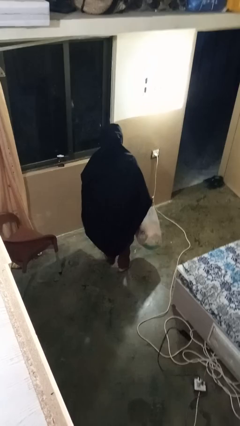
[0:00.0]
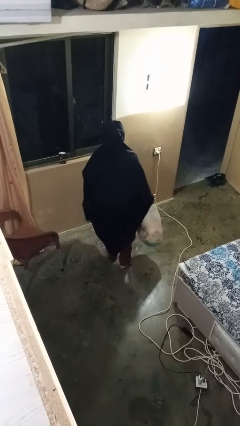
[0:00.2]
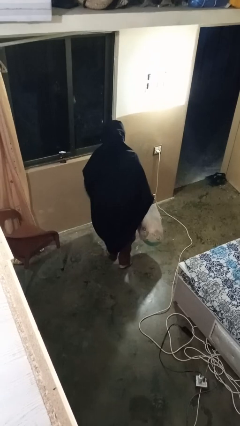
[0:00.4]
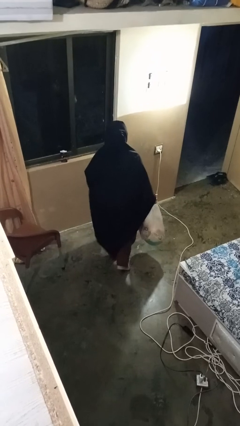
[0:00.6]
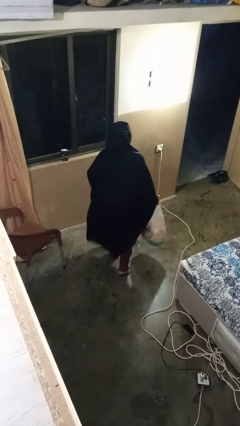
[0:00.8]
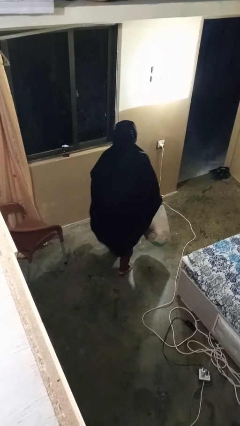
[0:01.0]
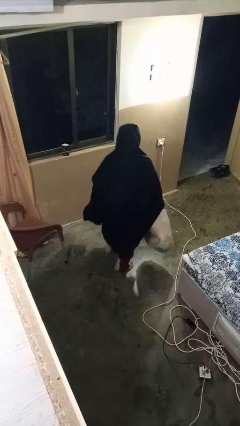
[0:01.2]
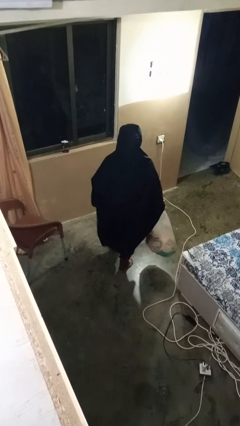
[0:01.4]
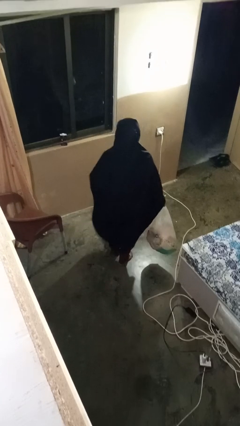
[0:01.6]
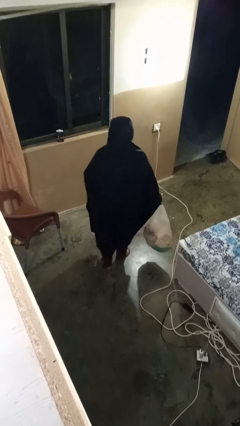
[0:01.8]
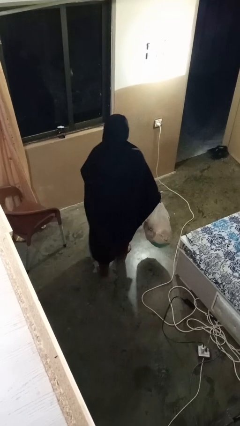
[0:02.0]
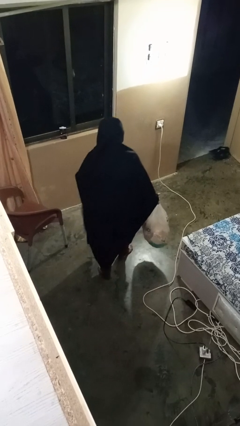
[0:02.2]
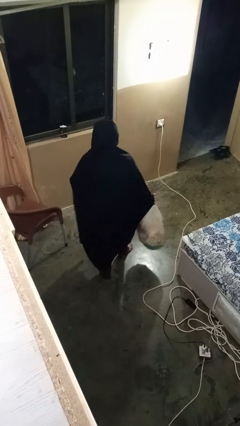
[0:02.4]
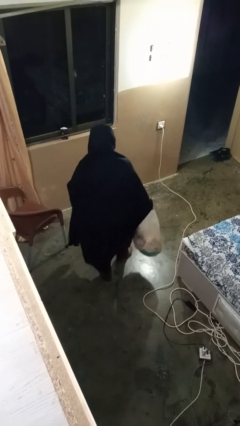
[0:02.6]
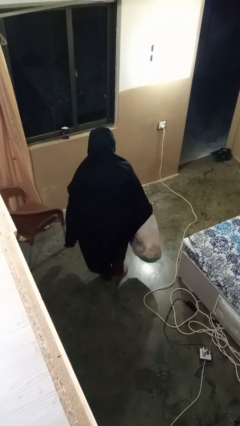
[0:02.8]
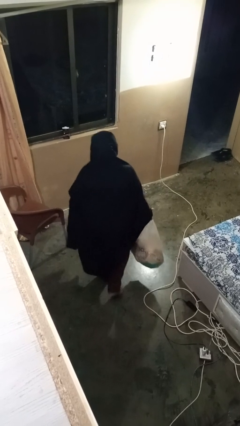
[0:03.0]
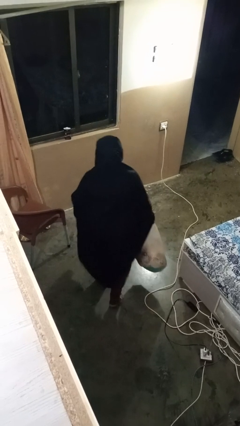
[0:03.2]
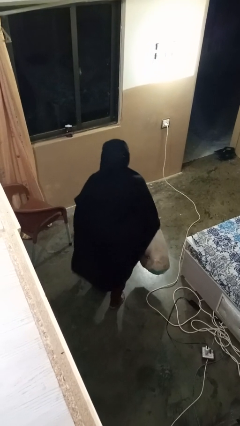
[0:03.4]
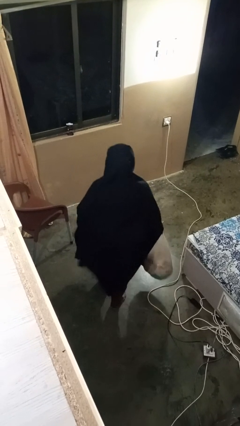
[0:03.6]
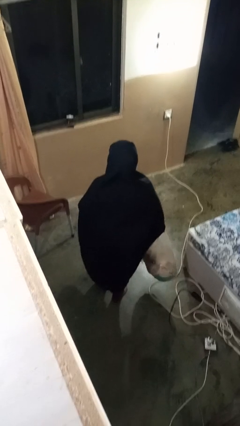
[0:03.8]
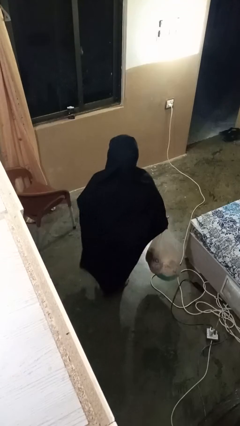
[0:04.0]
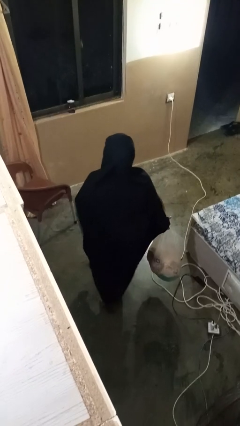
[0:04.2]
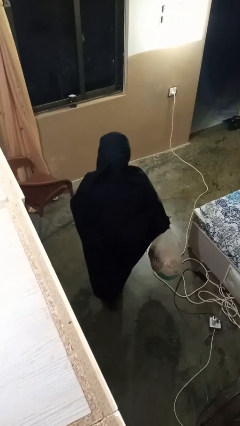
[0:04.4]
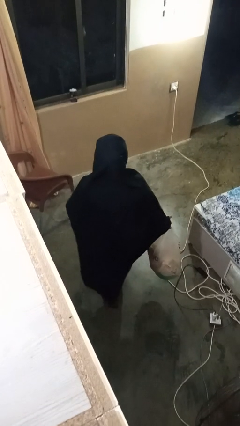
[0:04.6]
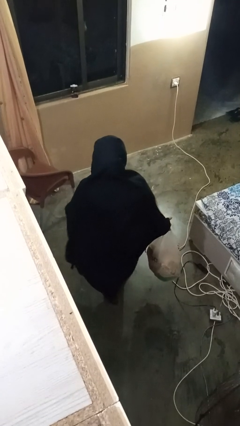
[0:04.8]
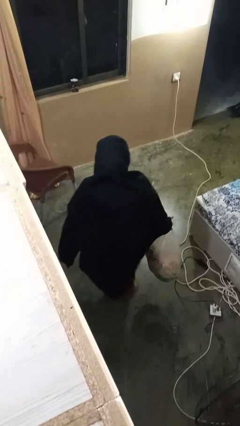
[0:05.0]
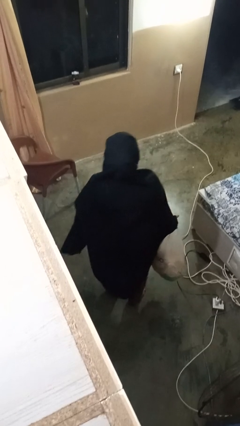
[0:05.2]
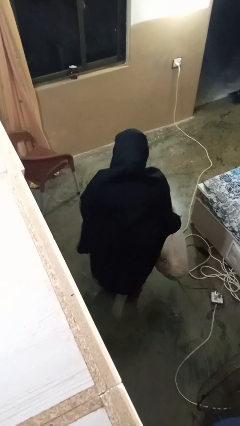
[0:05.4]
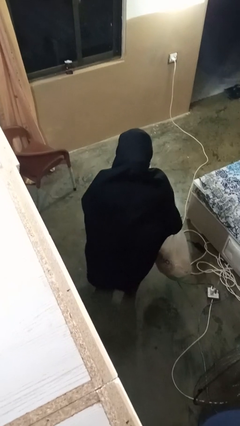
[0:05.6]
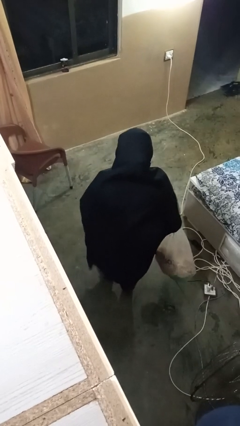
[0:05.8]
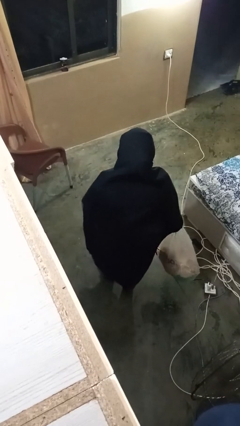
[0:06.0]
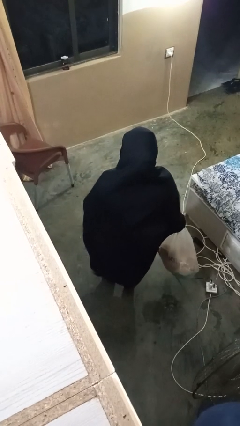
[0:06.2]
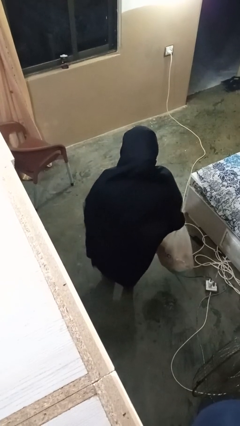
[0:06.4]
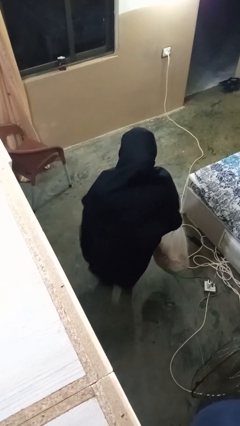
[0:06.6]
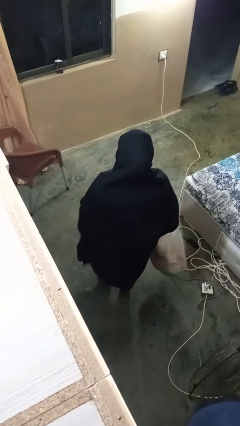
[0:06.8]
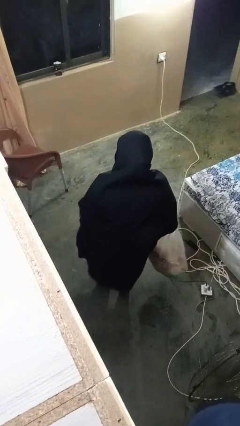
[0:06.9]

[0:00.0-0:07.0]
person carries groceries

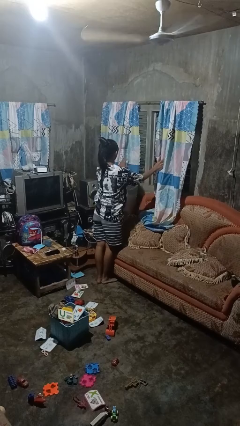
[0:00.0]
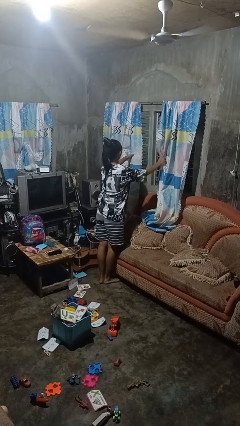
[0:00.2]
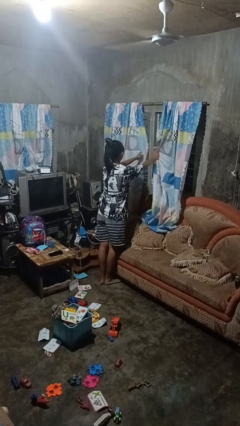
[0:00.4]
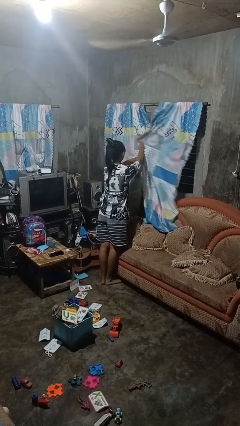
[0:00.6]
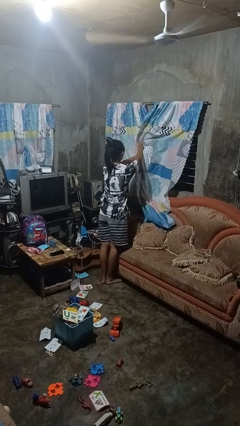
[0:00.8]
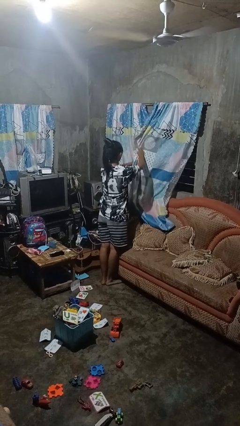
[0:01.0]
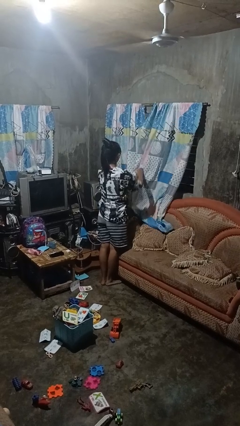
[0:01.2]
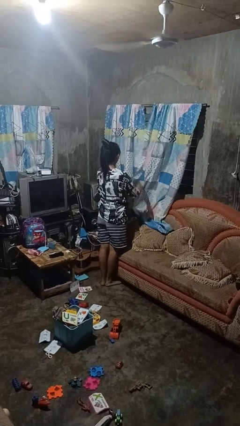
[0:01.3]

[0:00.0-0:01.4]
person closes curtains

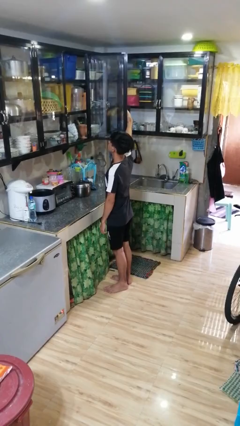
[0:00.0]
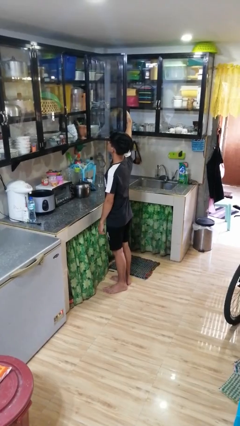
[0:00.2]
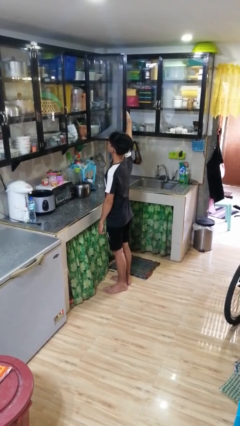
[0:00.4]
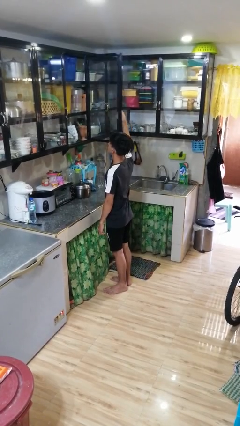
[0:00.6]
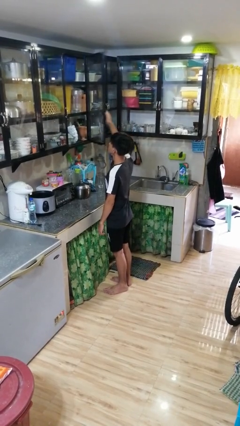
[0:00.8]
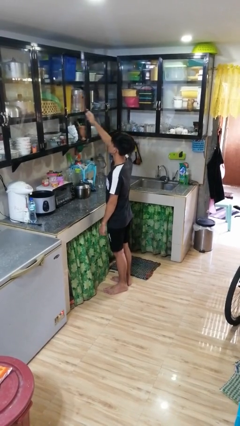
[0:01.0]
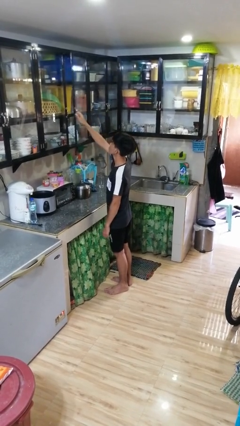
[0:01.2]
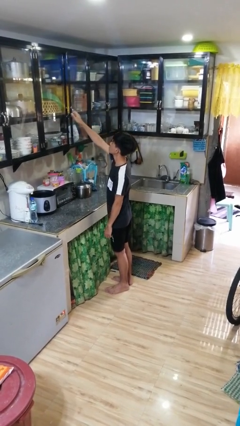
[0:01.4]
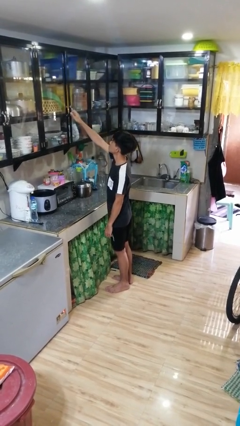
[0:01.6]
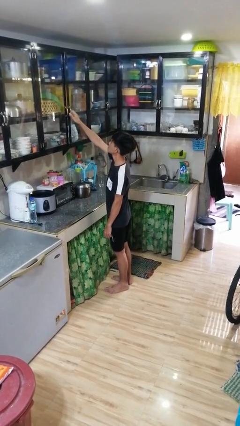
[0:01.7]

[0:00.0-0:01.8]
person closes cabinet

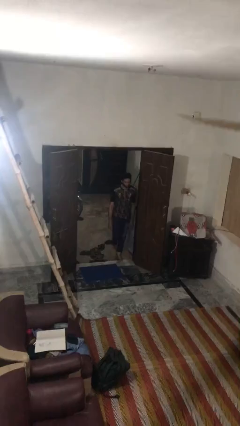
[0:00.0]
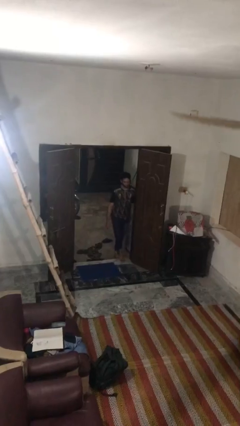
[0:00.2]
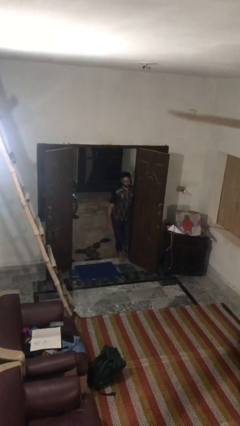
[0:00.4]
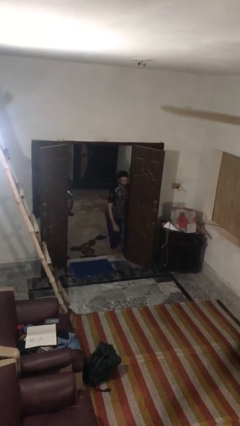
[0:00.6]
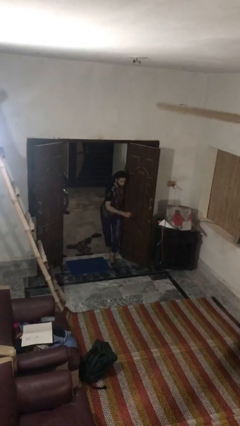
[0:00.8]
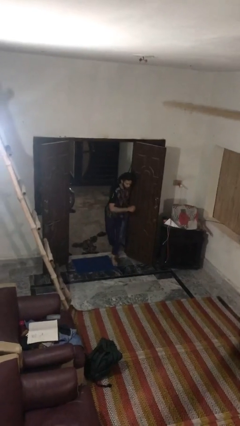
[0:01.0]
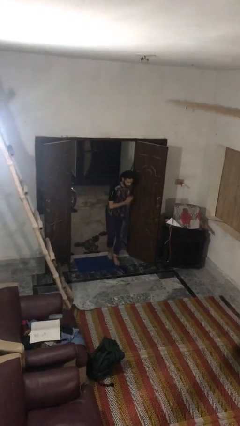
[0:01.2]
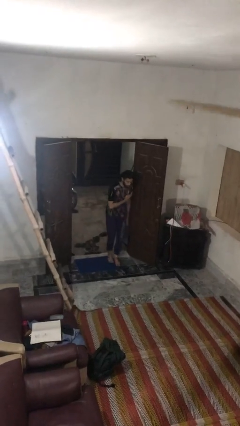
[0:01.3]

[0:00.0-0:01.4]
person bumps into wall

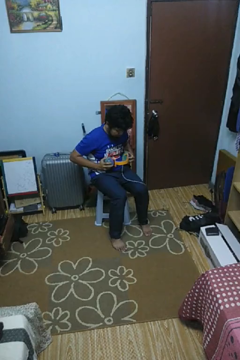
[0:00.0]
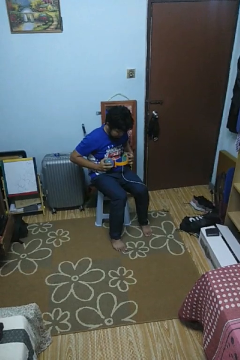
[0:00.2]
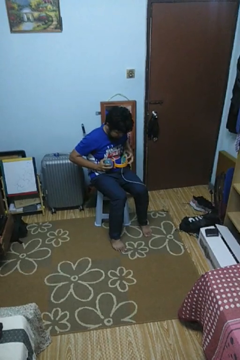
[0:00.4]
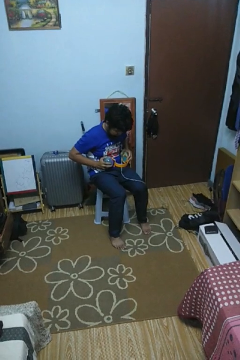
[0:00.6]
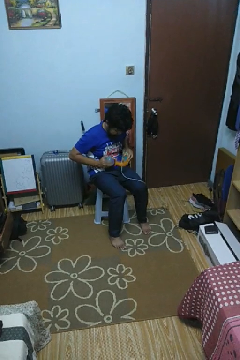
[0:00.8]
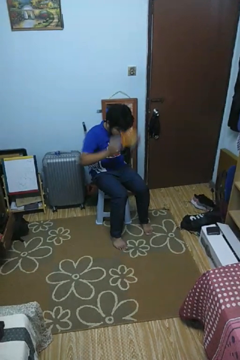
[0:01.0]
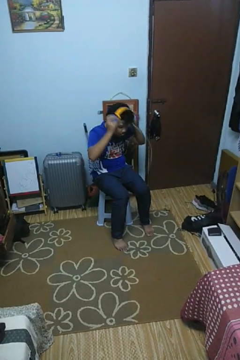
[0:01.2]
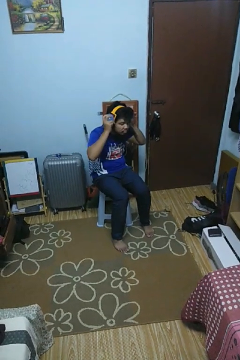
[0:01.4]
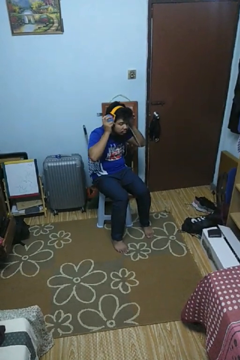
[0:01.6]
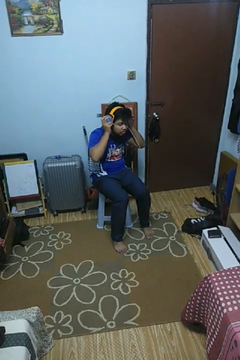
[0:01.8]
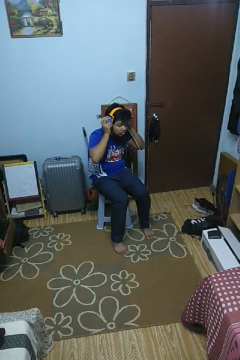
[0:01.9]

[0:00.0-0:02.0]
person puts on headphones

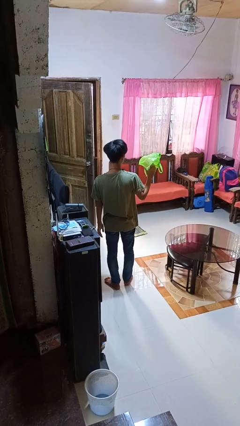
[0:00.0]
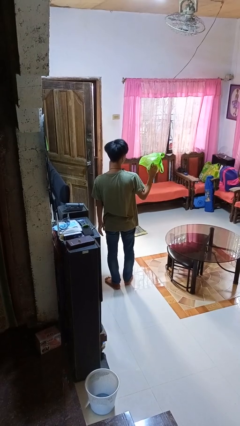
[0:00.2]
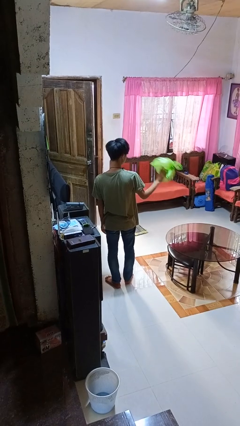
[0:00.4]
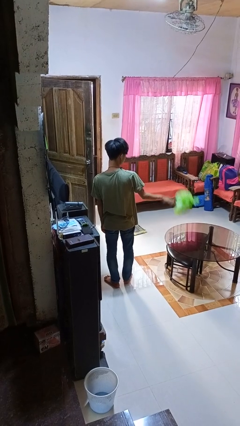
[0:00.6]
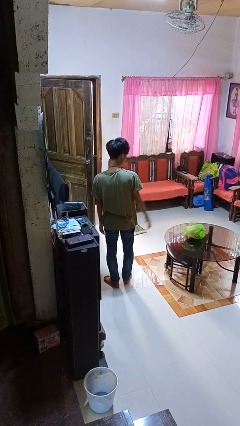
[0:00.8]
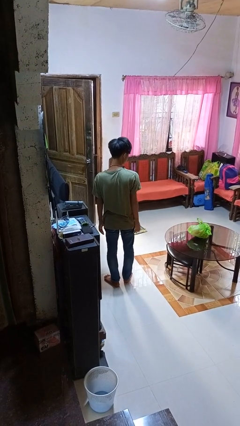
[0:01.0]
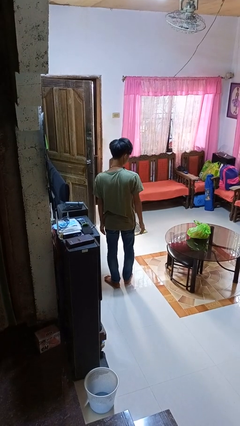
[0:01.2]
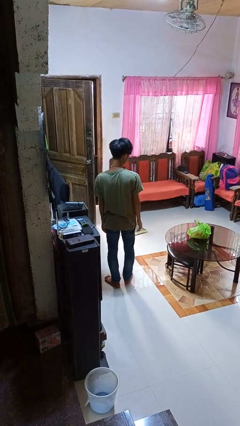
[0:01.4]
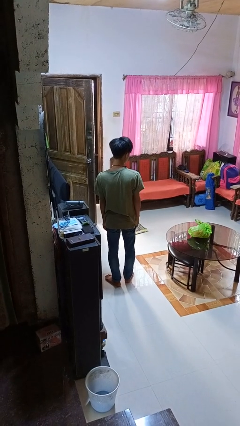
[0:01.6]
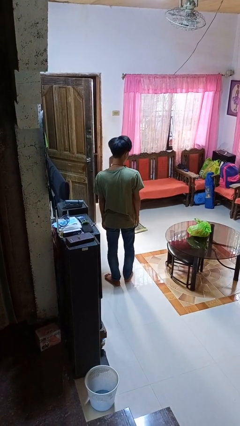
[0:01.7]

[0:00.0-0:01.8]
person throws object on table

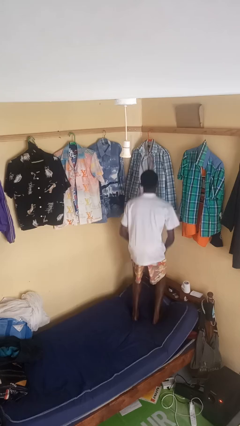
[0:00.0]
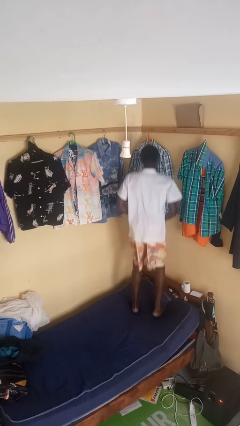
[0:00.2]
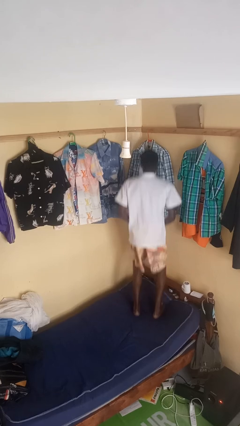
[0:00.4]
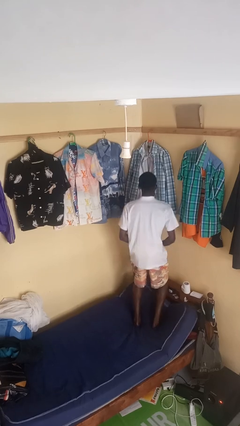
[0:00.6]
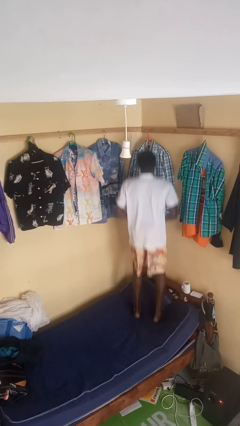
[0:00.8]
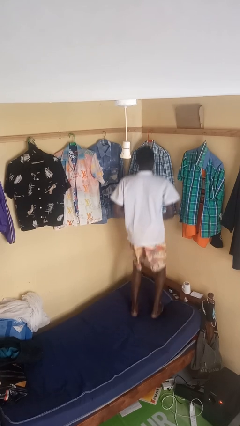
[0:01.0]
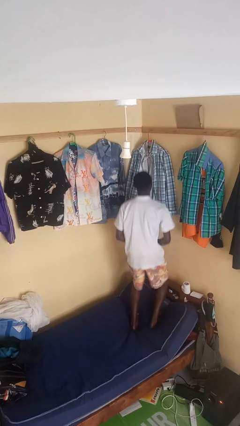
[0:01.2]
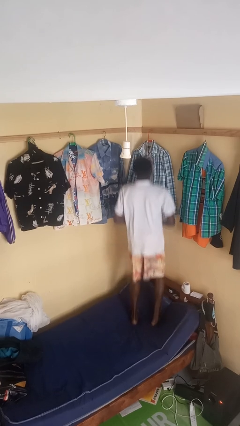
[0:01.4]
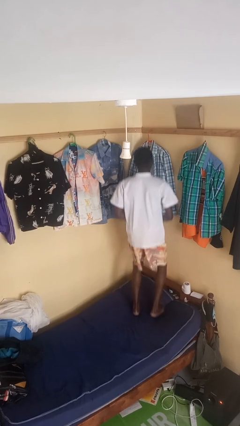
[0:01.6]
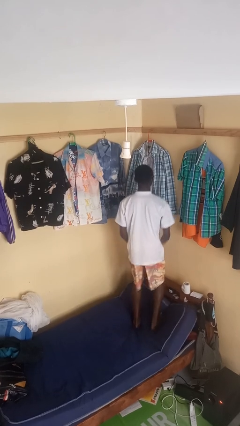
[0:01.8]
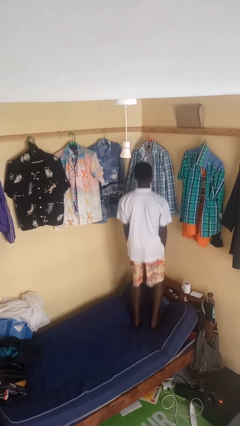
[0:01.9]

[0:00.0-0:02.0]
person jumps on bed
